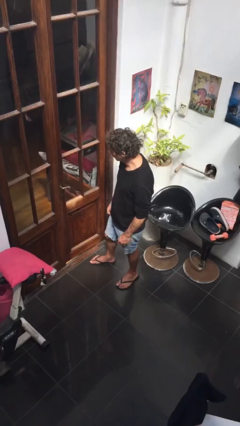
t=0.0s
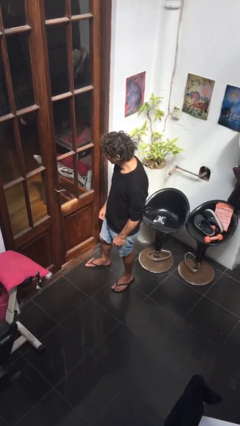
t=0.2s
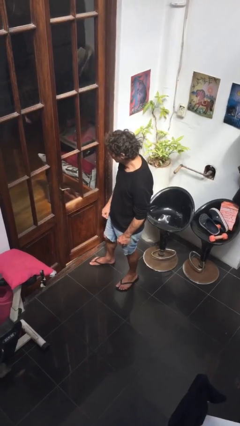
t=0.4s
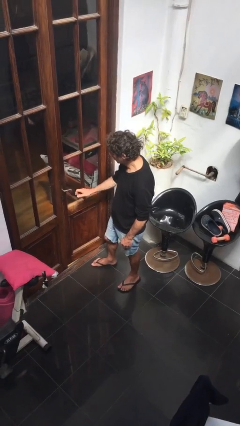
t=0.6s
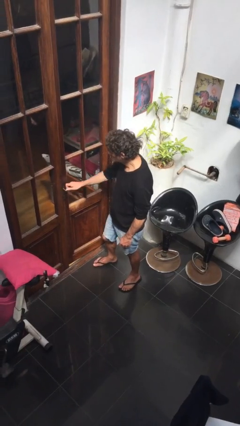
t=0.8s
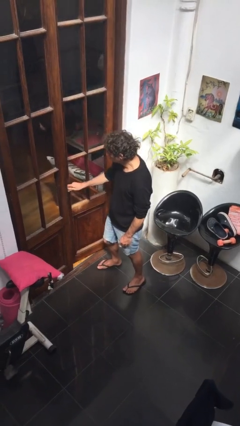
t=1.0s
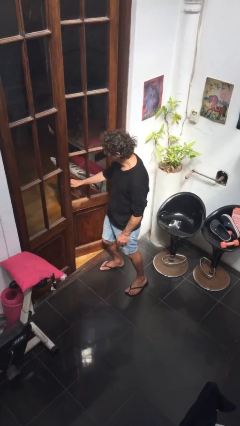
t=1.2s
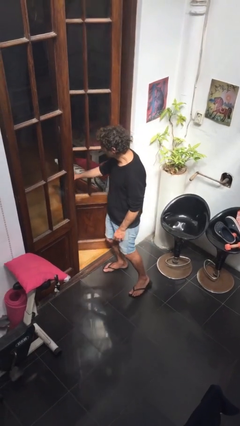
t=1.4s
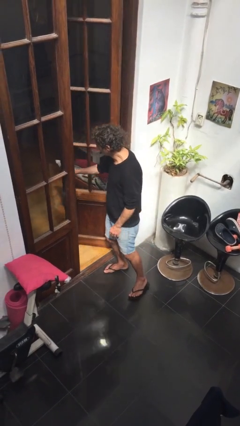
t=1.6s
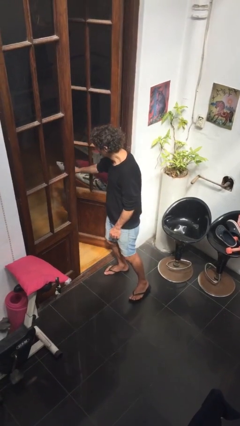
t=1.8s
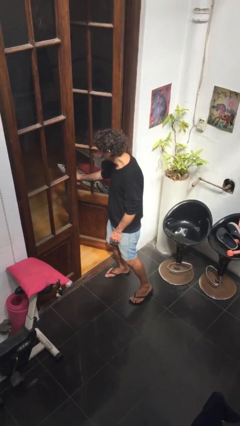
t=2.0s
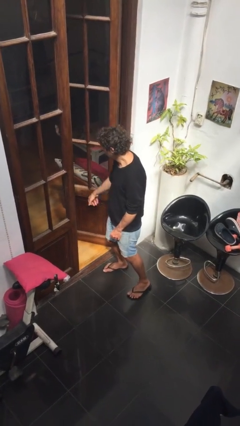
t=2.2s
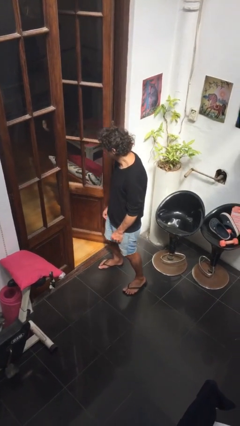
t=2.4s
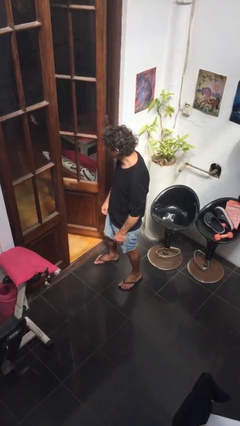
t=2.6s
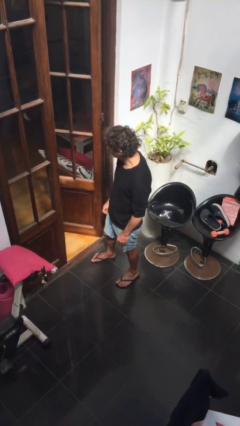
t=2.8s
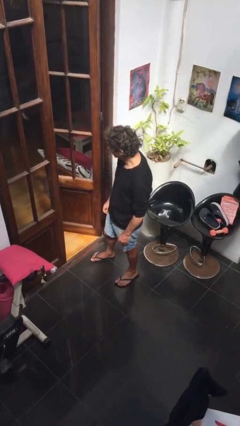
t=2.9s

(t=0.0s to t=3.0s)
person opens facility door

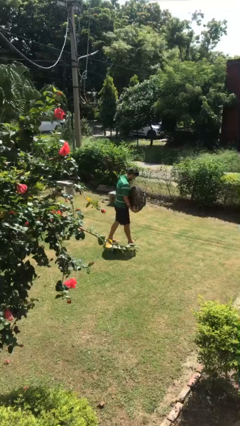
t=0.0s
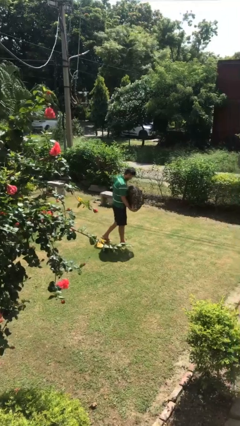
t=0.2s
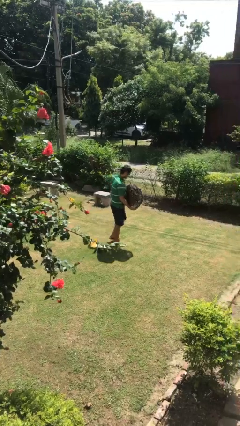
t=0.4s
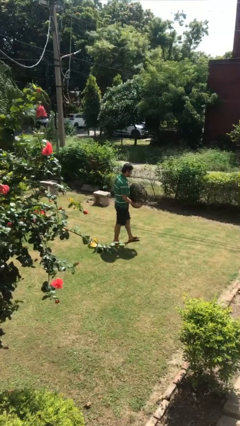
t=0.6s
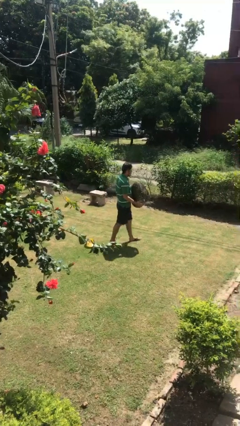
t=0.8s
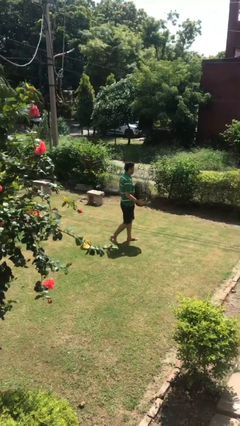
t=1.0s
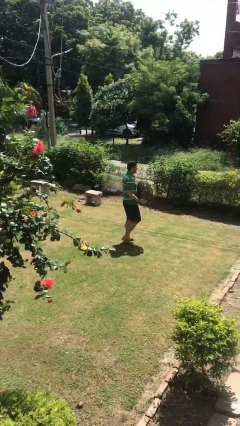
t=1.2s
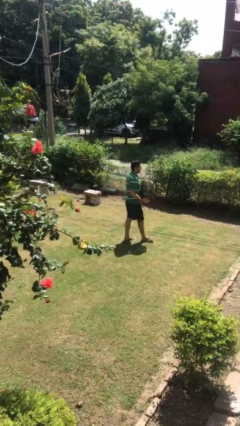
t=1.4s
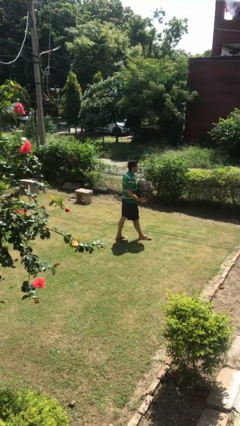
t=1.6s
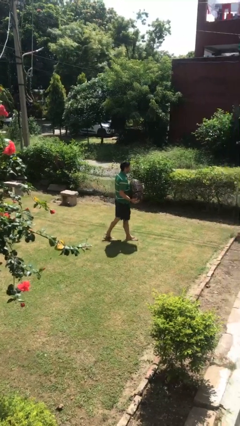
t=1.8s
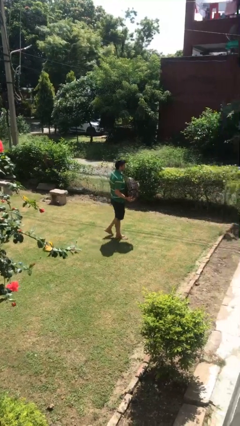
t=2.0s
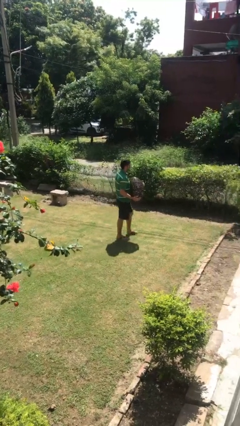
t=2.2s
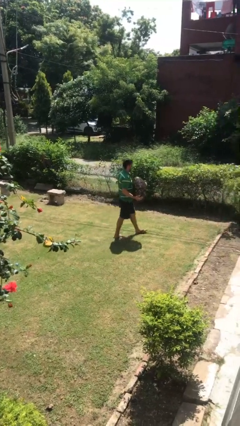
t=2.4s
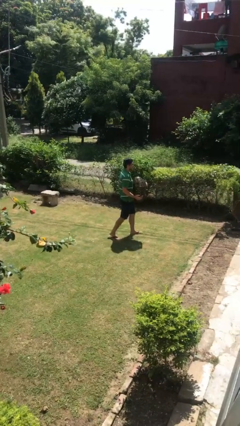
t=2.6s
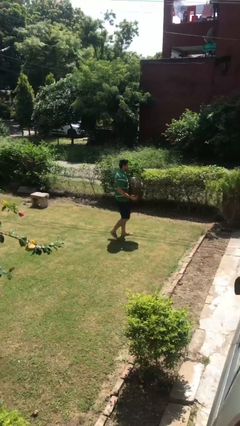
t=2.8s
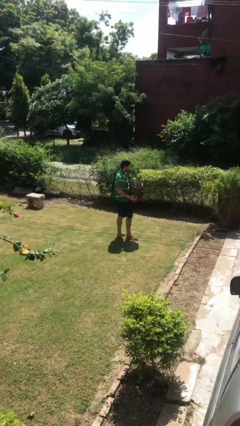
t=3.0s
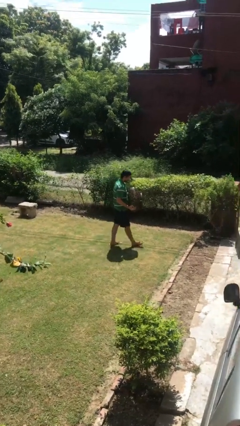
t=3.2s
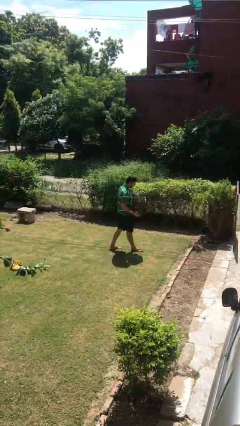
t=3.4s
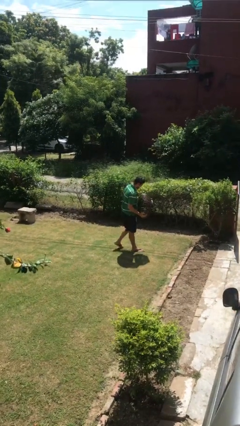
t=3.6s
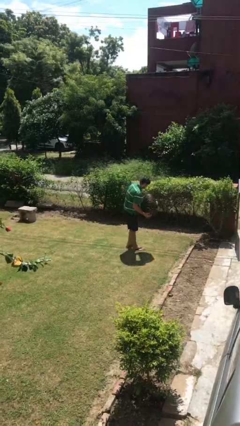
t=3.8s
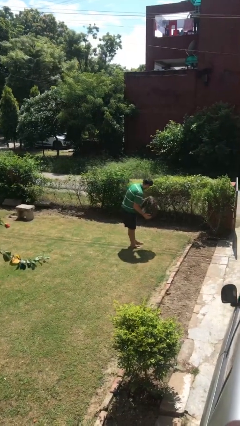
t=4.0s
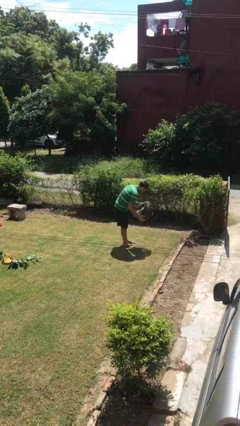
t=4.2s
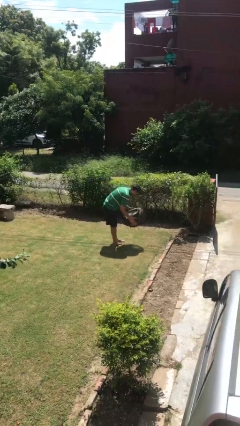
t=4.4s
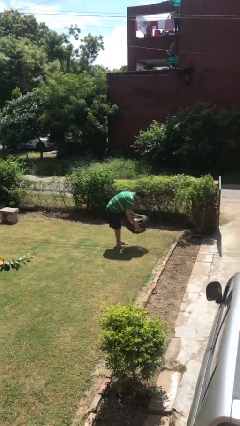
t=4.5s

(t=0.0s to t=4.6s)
person carries heavy object

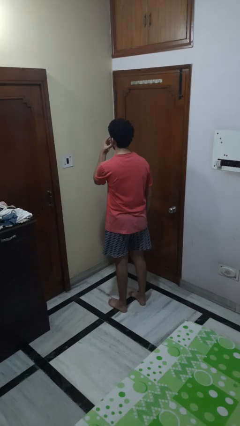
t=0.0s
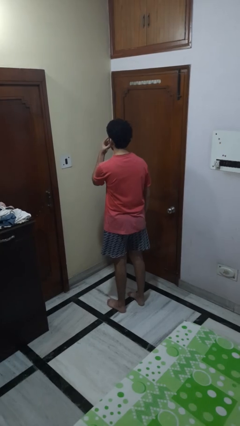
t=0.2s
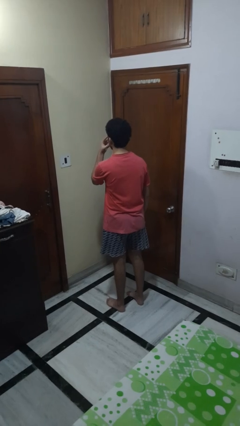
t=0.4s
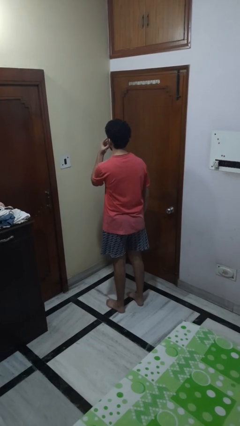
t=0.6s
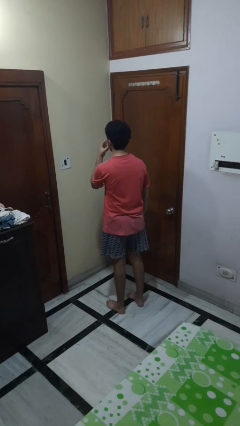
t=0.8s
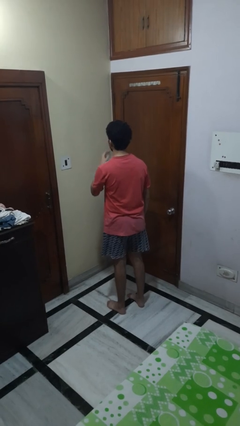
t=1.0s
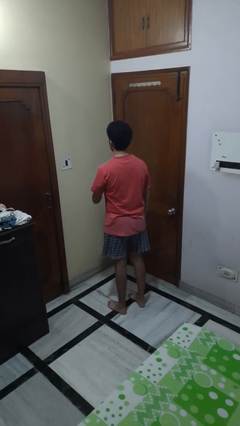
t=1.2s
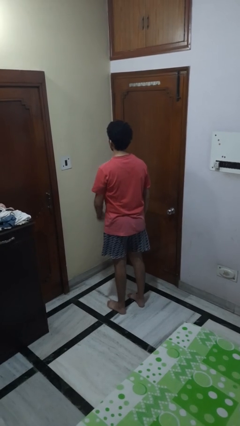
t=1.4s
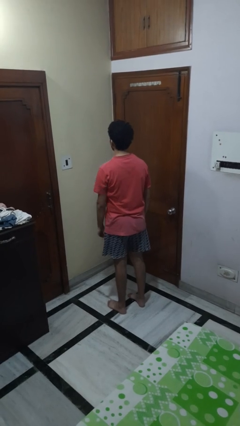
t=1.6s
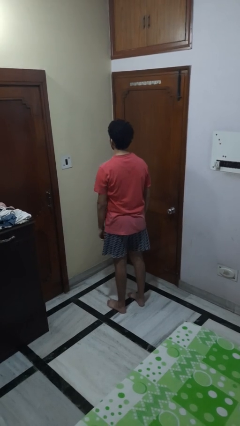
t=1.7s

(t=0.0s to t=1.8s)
person gestures watch closely

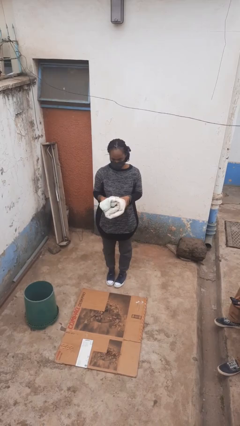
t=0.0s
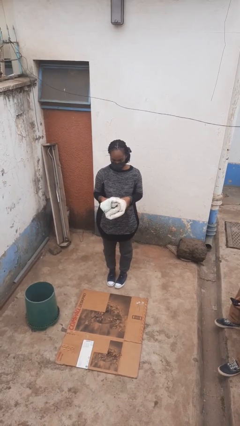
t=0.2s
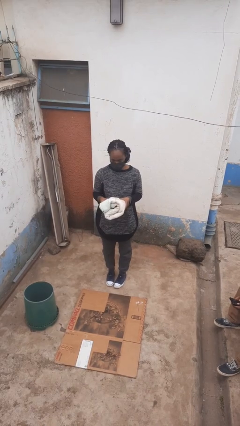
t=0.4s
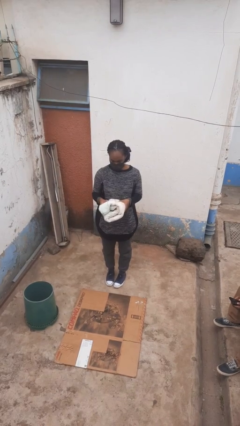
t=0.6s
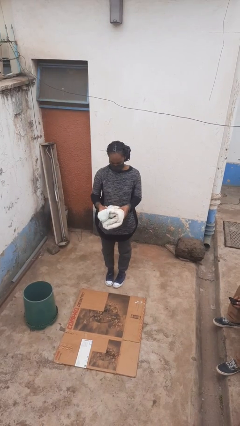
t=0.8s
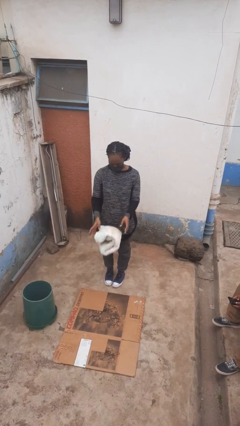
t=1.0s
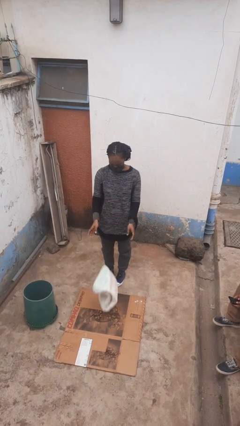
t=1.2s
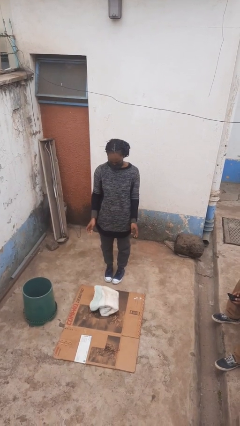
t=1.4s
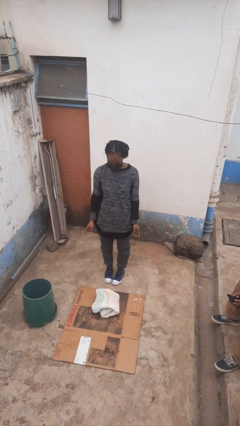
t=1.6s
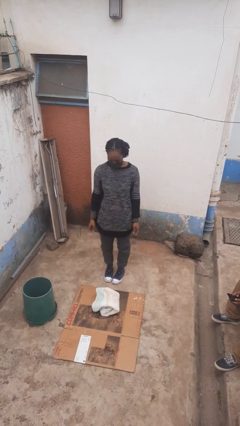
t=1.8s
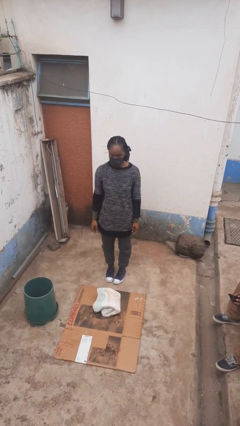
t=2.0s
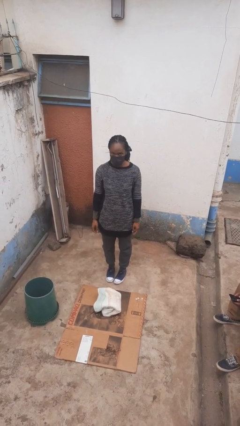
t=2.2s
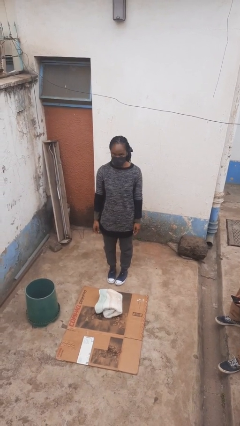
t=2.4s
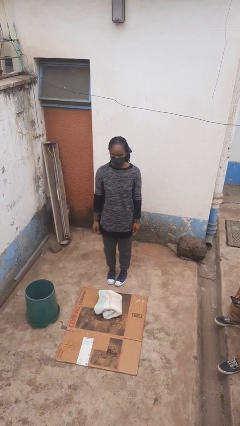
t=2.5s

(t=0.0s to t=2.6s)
person drops object

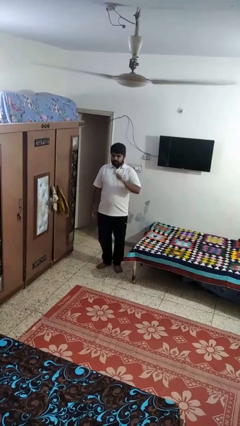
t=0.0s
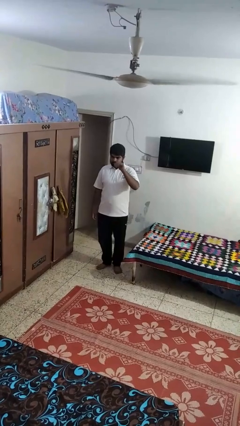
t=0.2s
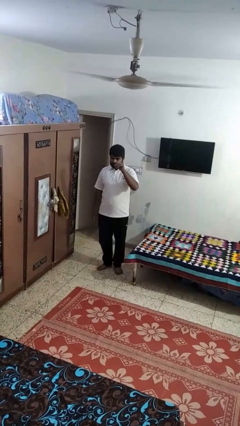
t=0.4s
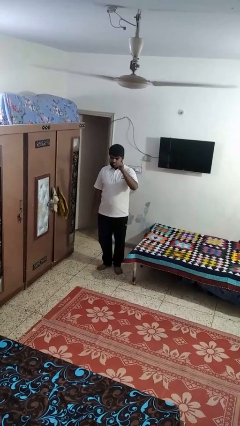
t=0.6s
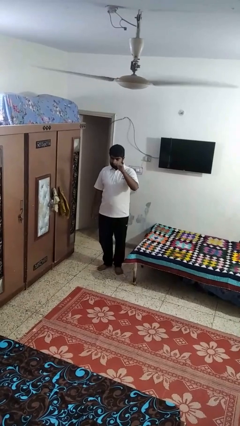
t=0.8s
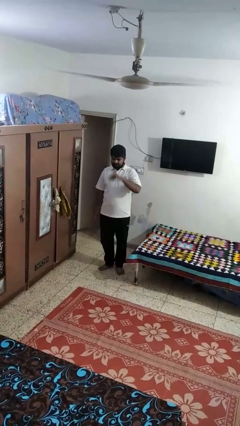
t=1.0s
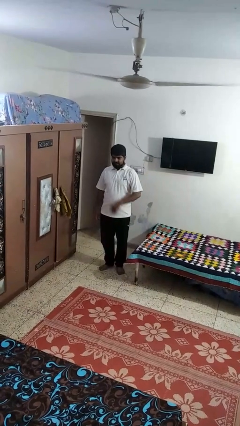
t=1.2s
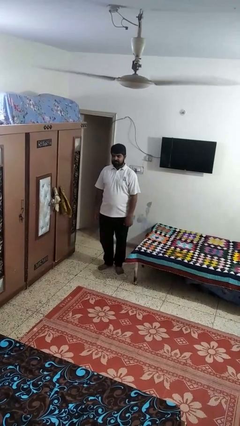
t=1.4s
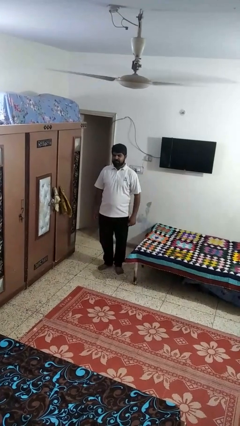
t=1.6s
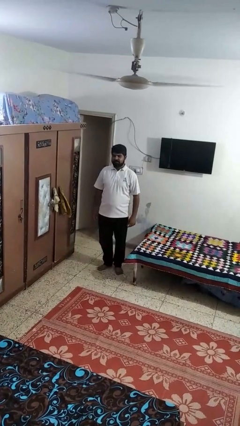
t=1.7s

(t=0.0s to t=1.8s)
person gestures come here

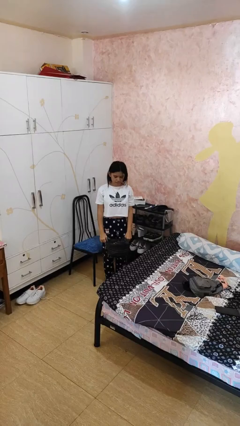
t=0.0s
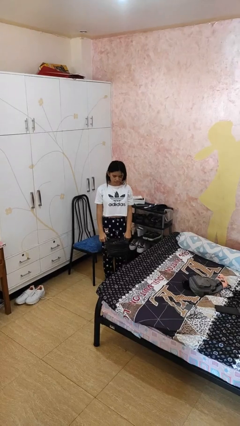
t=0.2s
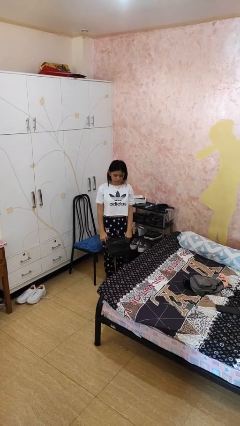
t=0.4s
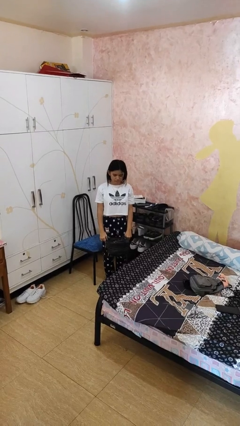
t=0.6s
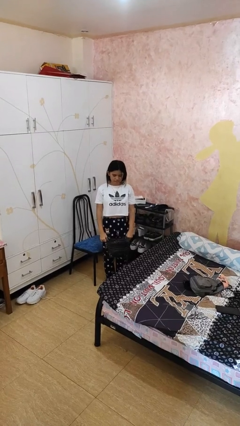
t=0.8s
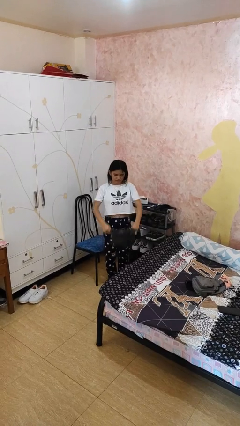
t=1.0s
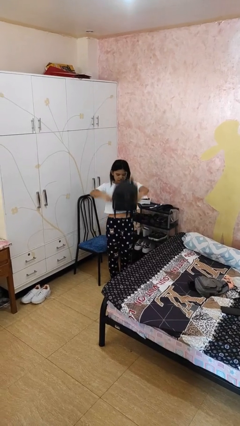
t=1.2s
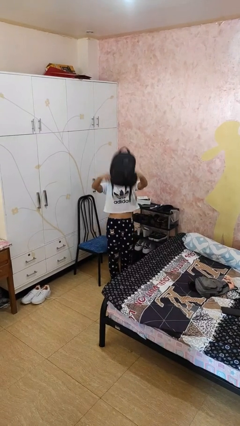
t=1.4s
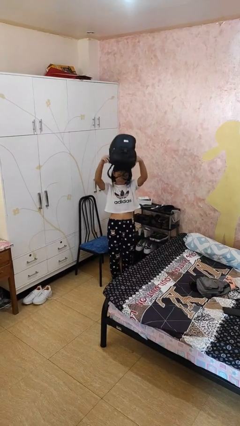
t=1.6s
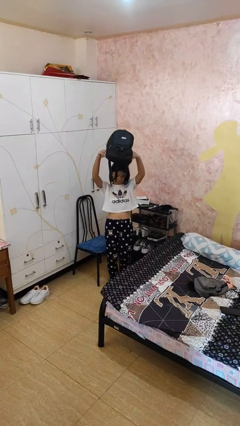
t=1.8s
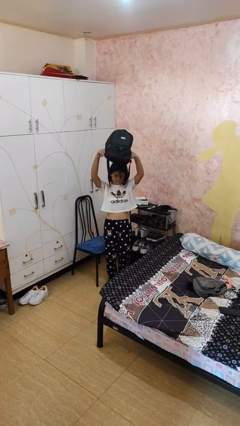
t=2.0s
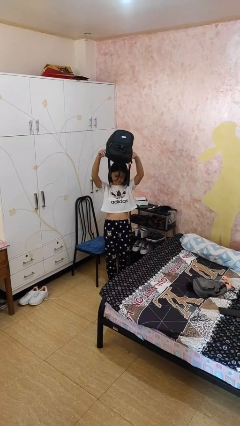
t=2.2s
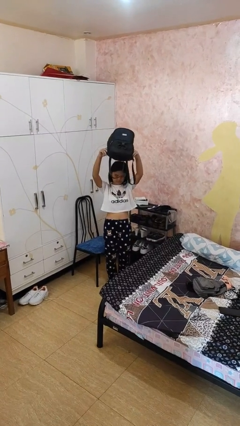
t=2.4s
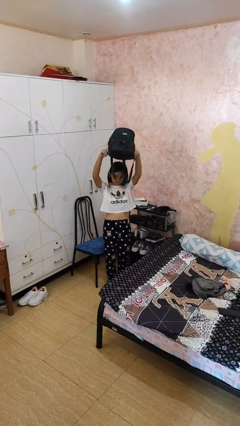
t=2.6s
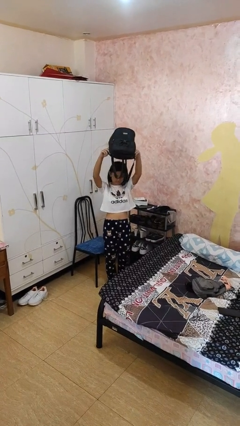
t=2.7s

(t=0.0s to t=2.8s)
person holds object above head

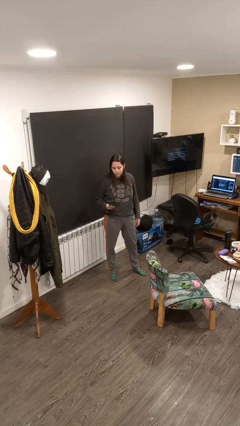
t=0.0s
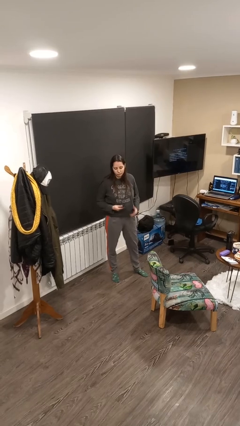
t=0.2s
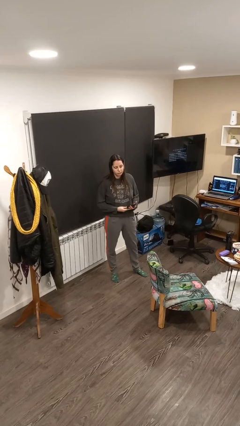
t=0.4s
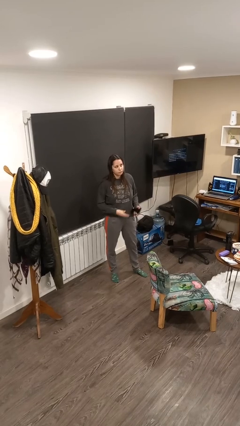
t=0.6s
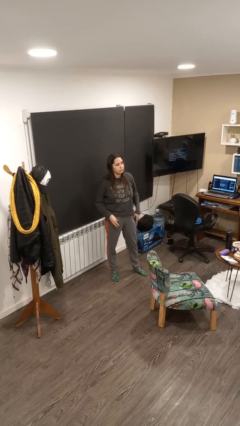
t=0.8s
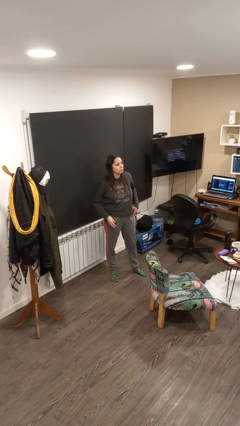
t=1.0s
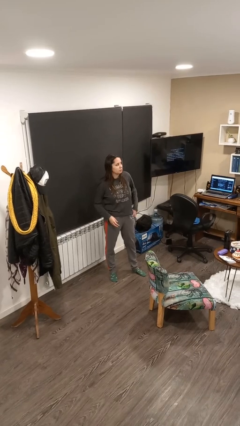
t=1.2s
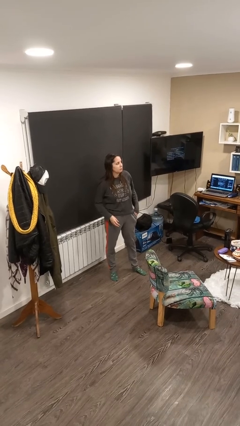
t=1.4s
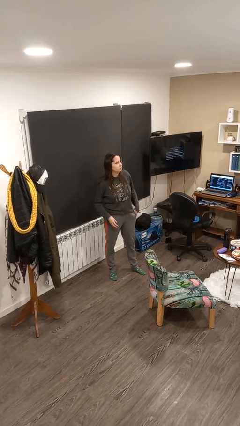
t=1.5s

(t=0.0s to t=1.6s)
person puts phone into pocket
